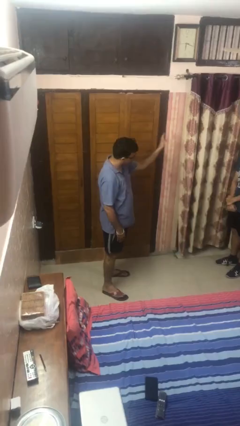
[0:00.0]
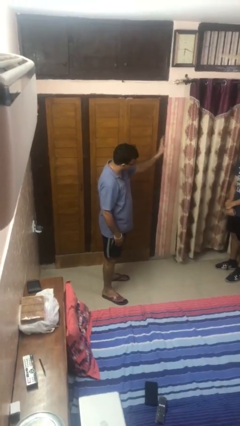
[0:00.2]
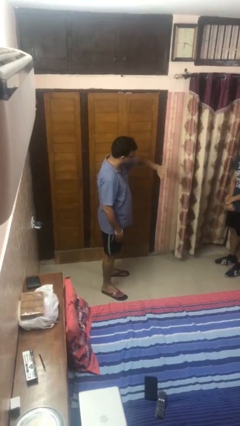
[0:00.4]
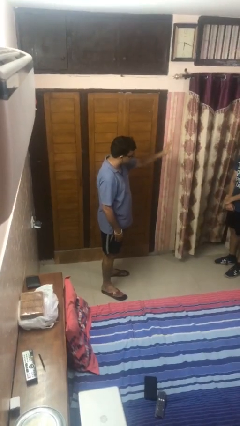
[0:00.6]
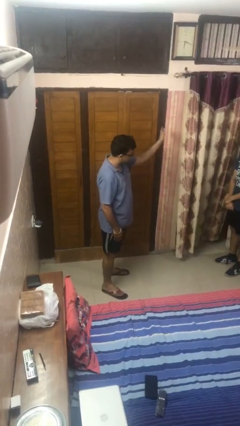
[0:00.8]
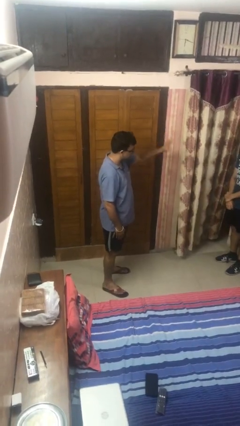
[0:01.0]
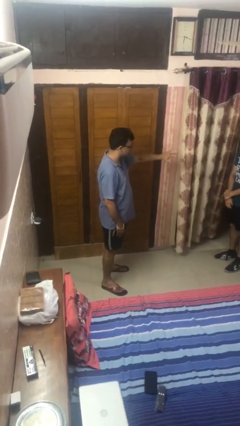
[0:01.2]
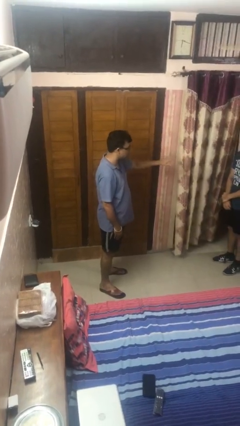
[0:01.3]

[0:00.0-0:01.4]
person waves at person

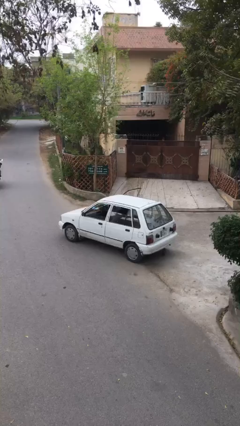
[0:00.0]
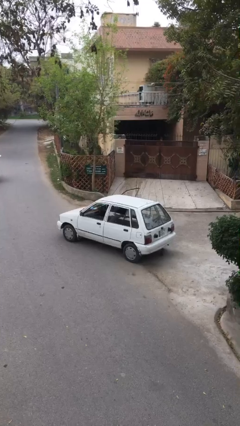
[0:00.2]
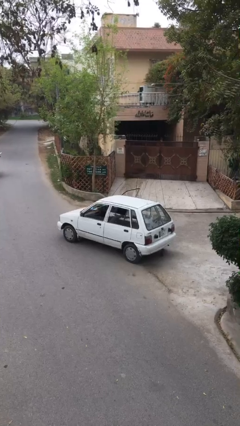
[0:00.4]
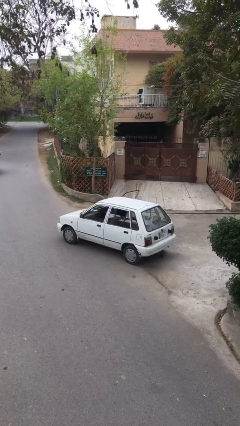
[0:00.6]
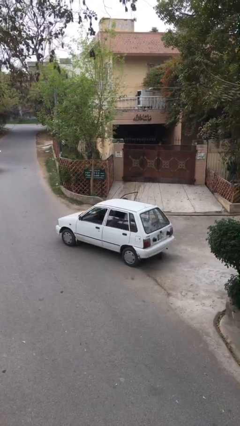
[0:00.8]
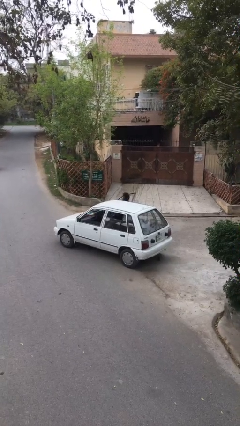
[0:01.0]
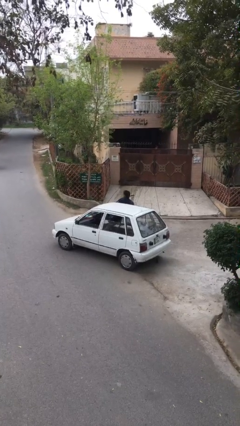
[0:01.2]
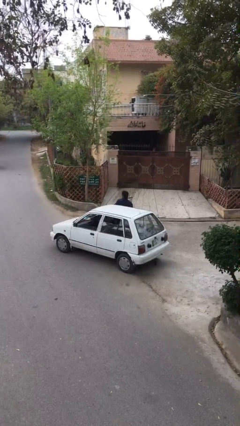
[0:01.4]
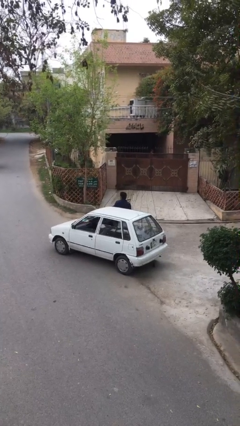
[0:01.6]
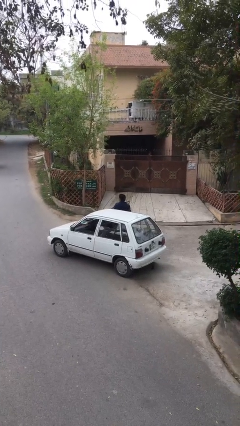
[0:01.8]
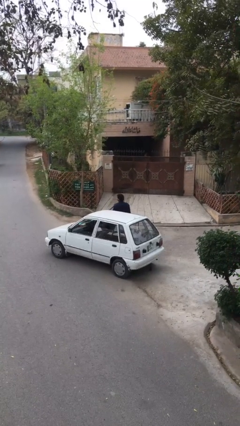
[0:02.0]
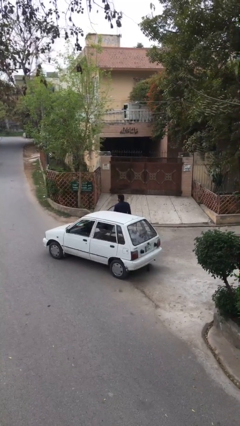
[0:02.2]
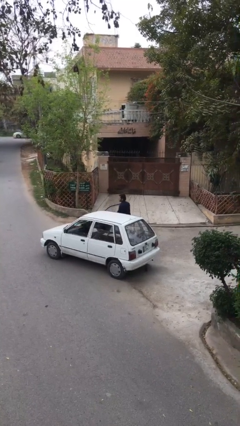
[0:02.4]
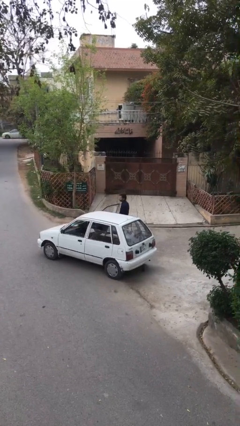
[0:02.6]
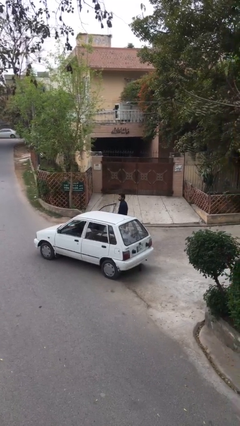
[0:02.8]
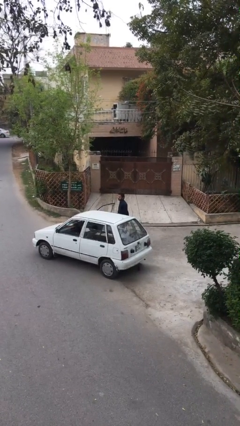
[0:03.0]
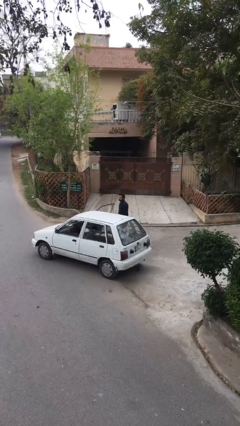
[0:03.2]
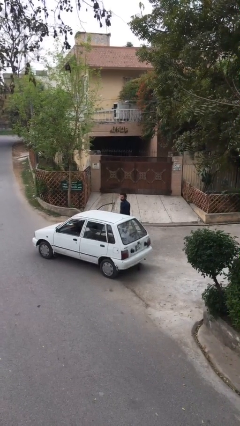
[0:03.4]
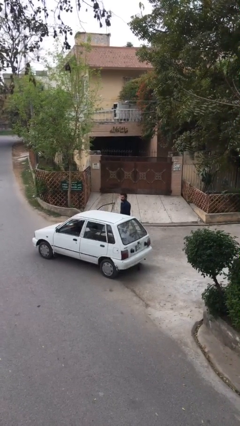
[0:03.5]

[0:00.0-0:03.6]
person exits car

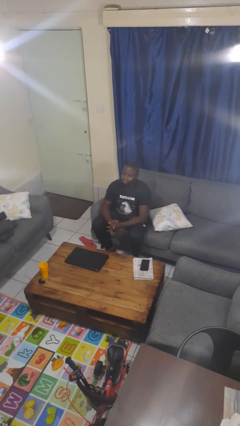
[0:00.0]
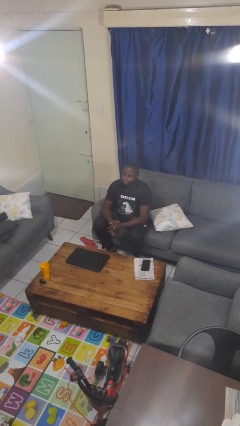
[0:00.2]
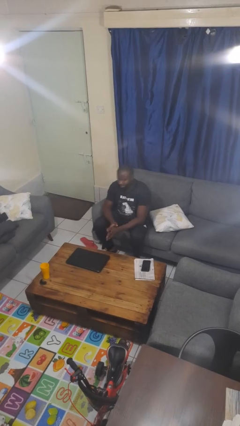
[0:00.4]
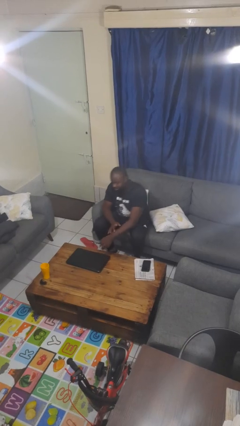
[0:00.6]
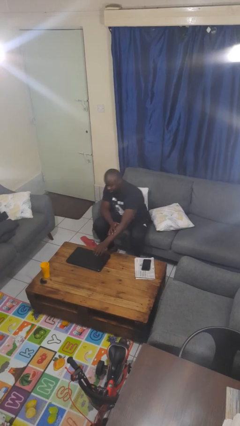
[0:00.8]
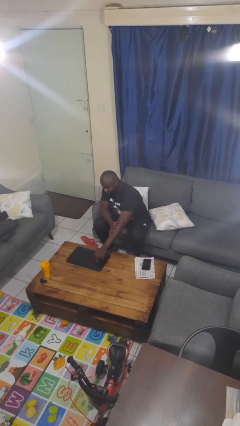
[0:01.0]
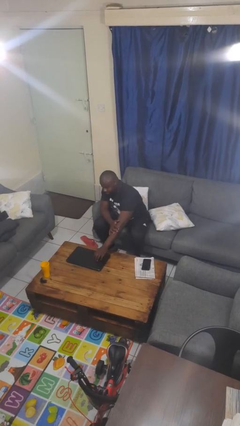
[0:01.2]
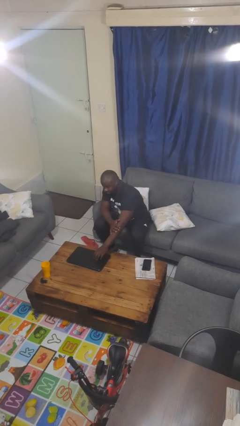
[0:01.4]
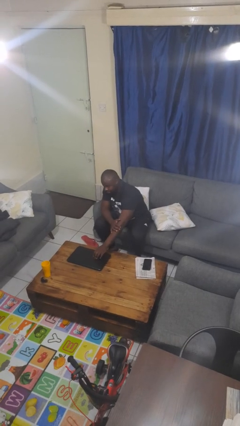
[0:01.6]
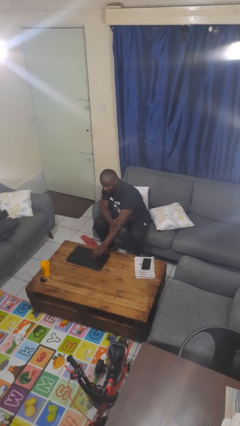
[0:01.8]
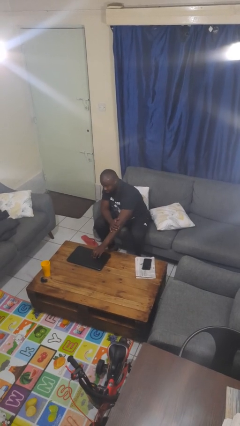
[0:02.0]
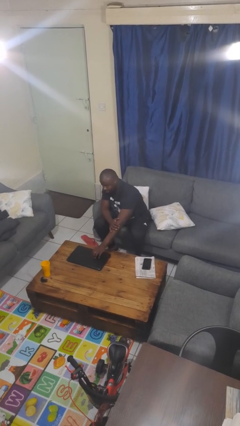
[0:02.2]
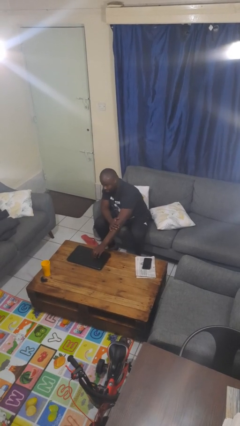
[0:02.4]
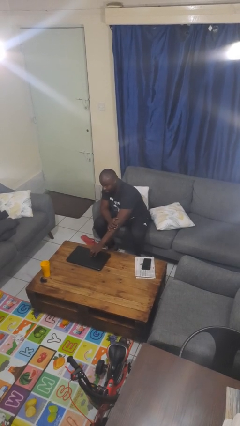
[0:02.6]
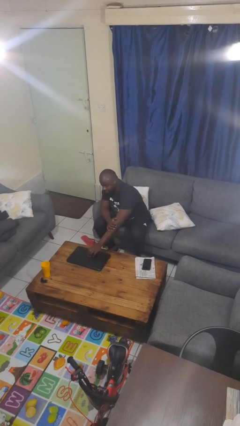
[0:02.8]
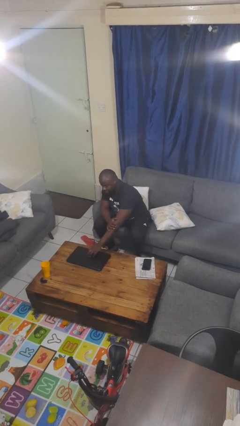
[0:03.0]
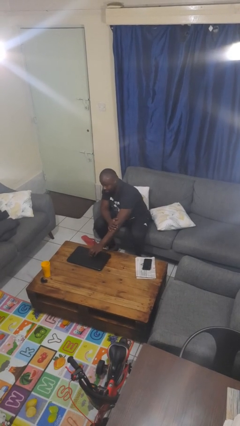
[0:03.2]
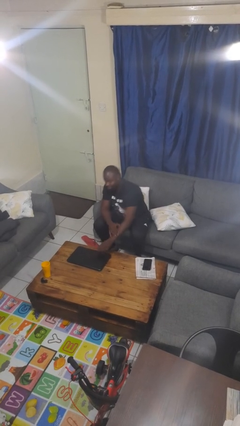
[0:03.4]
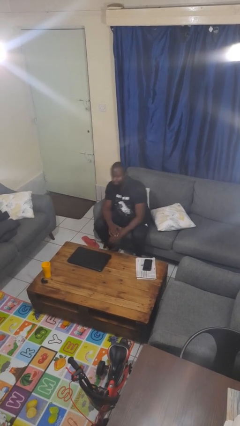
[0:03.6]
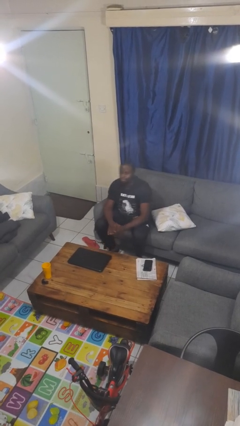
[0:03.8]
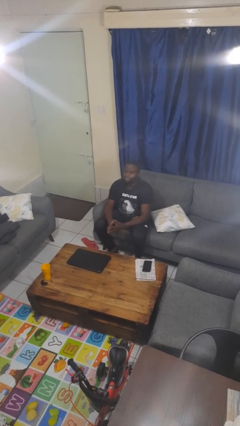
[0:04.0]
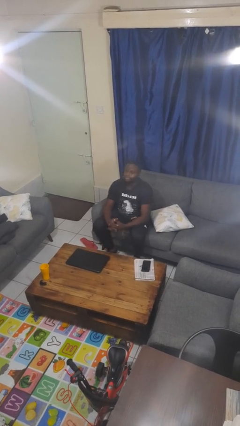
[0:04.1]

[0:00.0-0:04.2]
person taps object with finger

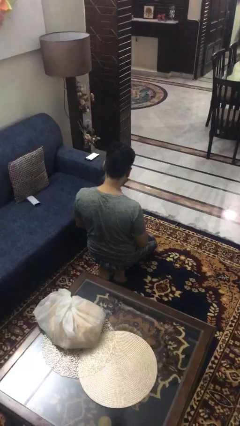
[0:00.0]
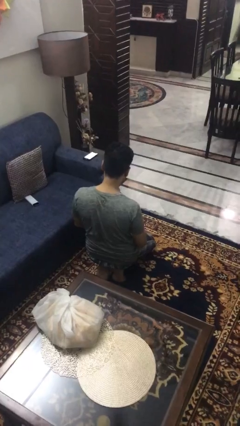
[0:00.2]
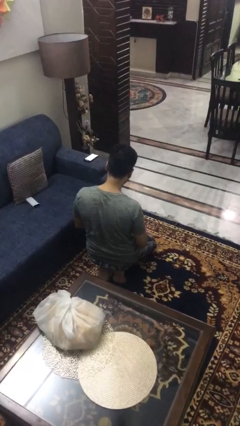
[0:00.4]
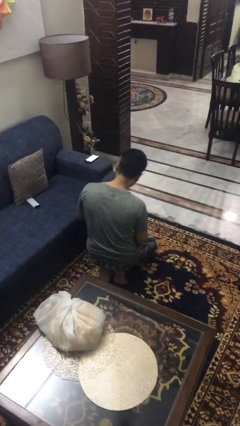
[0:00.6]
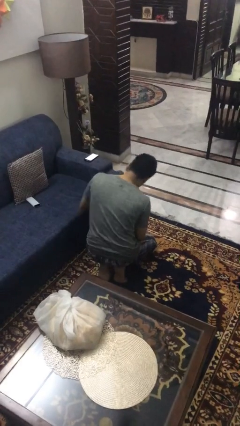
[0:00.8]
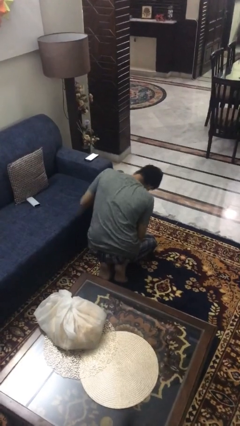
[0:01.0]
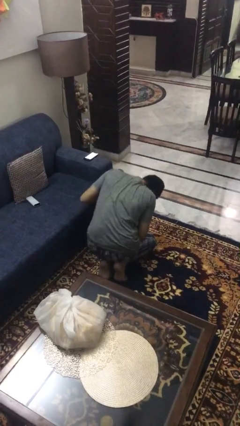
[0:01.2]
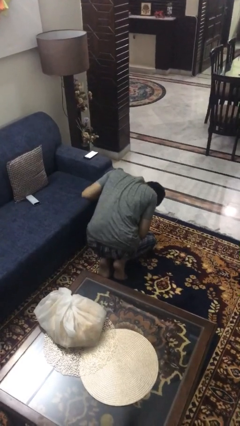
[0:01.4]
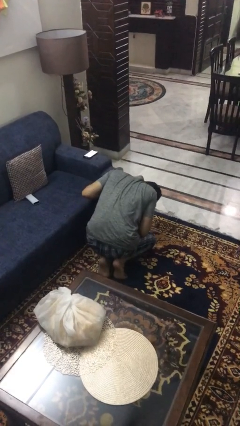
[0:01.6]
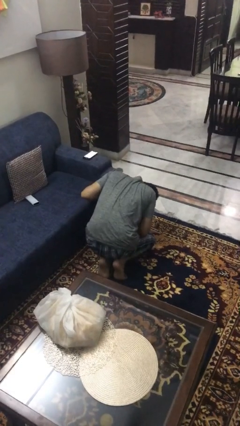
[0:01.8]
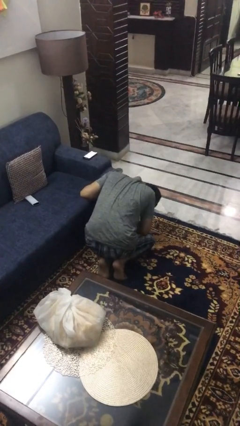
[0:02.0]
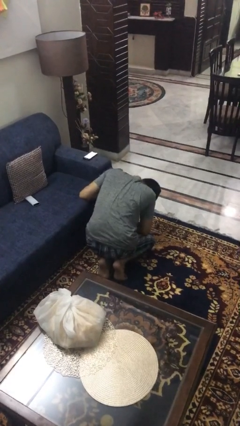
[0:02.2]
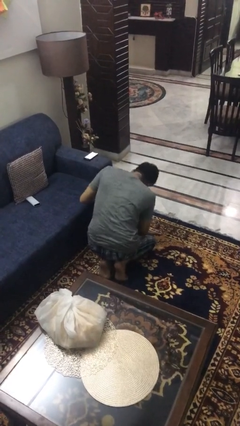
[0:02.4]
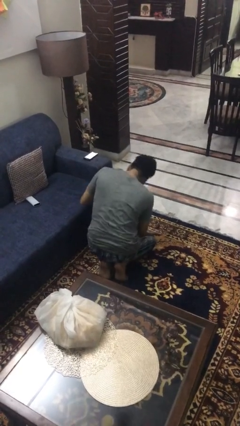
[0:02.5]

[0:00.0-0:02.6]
person searches under couch

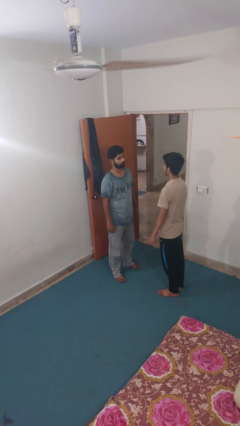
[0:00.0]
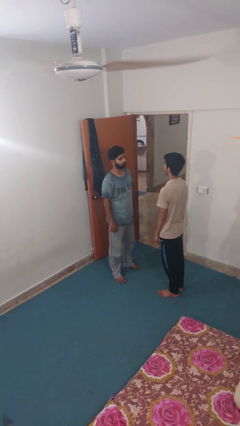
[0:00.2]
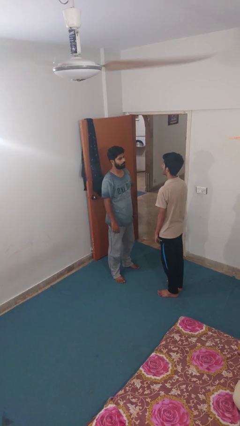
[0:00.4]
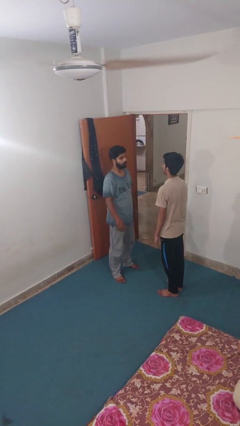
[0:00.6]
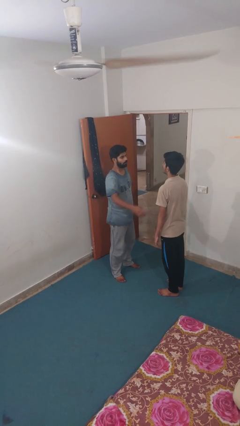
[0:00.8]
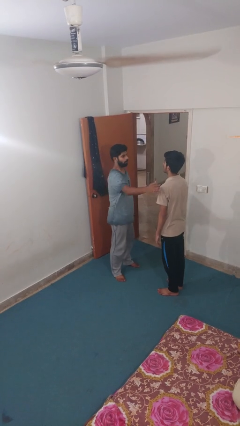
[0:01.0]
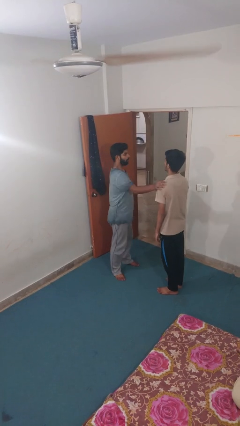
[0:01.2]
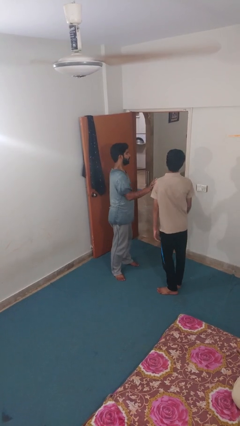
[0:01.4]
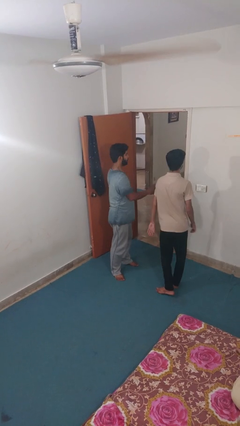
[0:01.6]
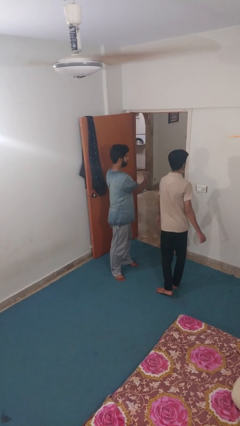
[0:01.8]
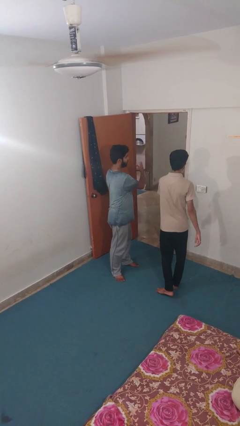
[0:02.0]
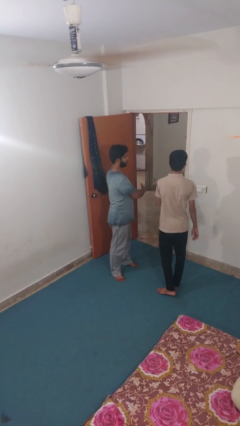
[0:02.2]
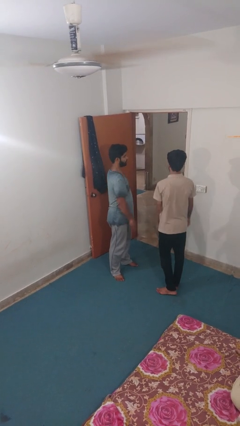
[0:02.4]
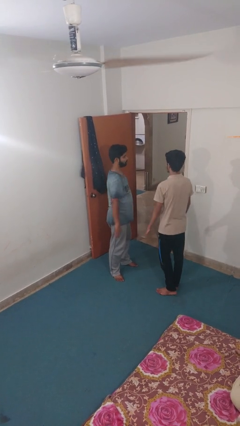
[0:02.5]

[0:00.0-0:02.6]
person shoves person

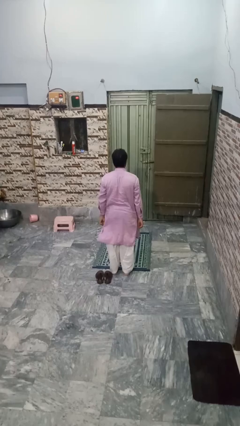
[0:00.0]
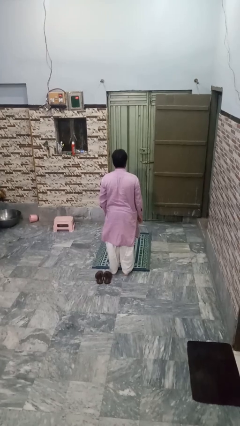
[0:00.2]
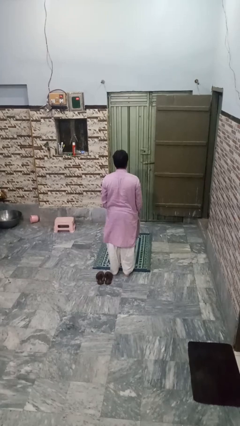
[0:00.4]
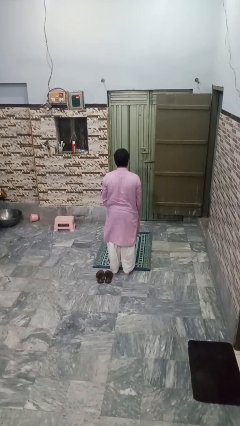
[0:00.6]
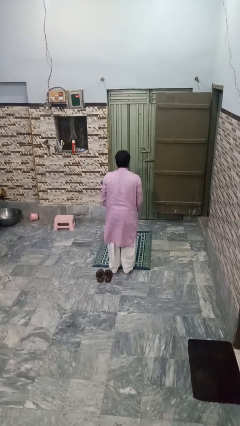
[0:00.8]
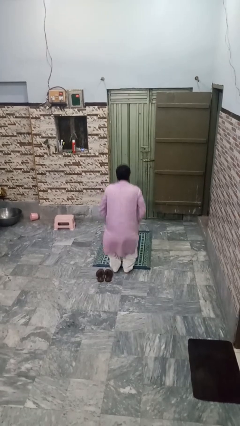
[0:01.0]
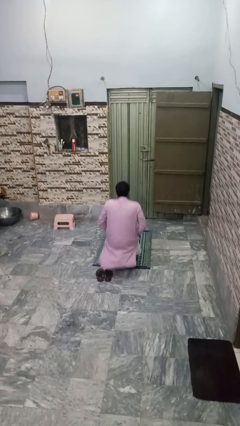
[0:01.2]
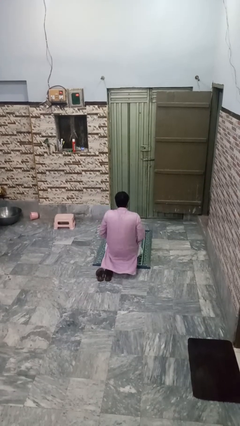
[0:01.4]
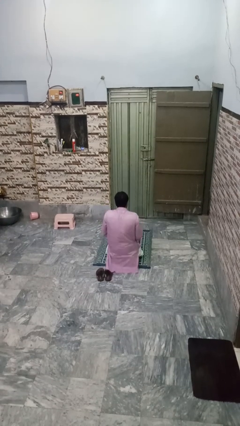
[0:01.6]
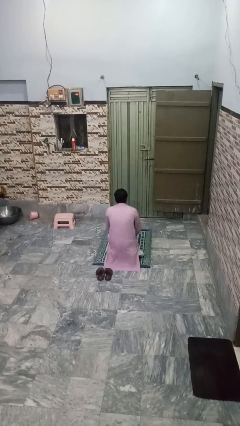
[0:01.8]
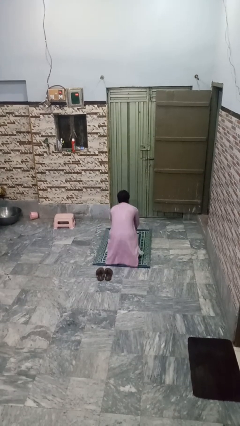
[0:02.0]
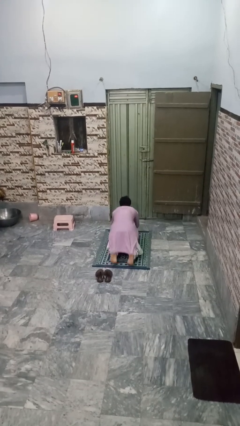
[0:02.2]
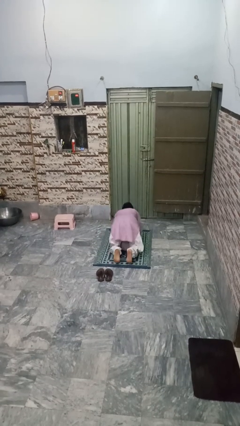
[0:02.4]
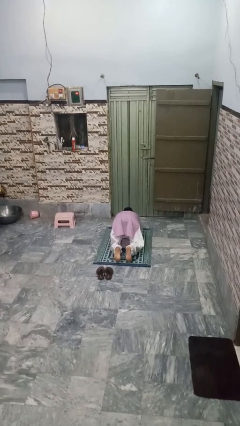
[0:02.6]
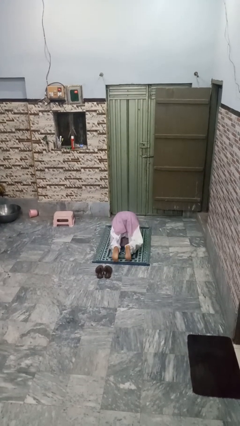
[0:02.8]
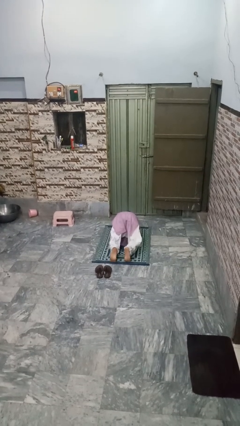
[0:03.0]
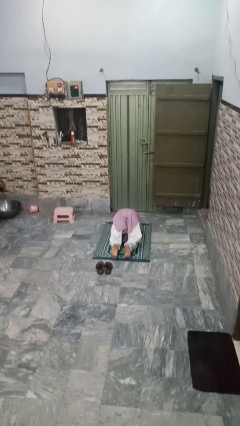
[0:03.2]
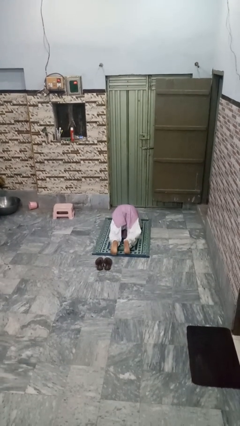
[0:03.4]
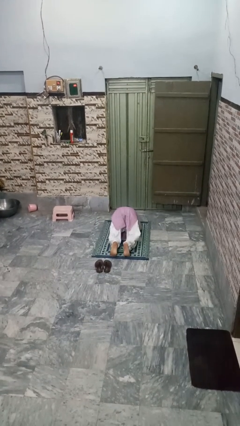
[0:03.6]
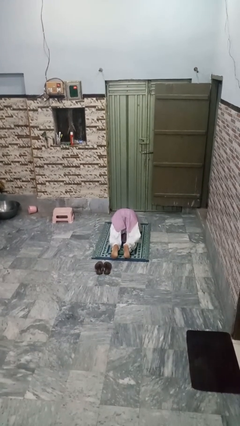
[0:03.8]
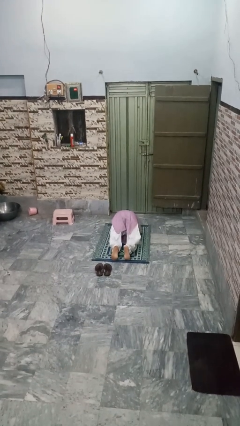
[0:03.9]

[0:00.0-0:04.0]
person exercises with plank
